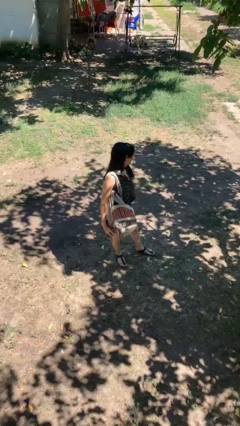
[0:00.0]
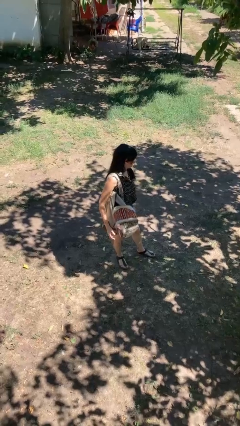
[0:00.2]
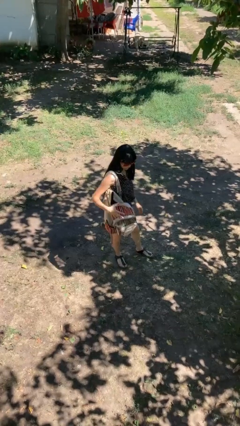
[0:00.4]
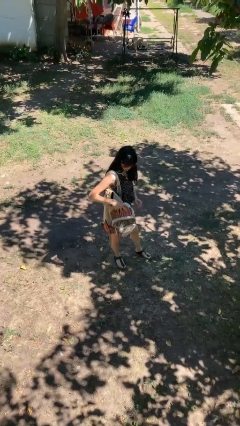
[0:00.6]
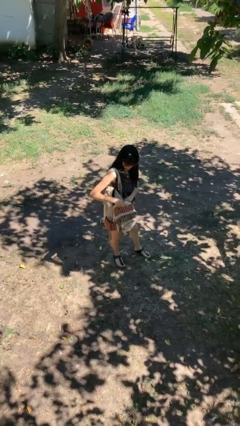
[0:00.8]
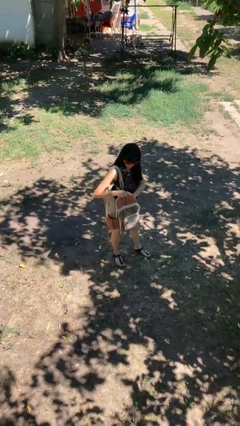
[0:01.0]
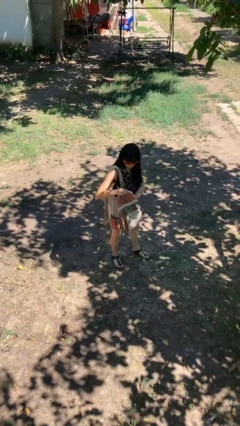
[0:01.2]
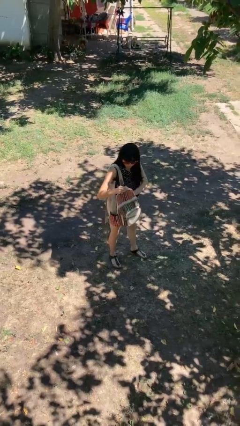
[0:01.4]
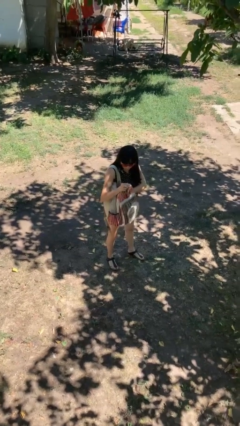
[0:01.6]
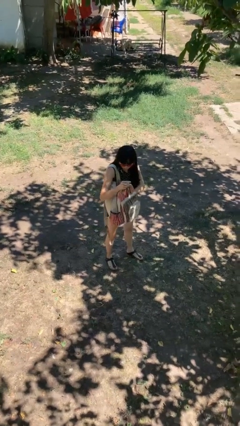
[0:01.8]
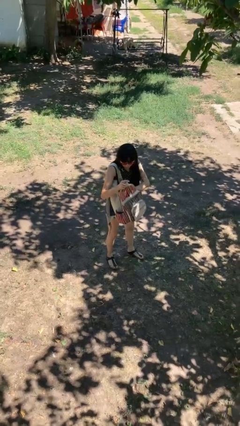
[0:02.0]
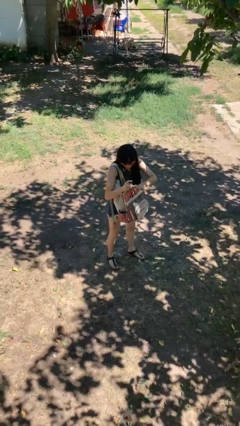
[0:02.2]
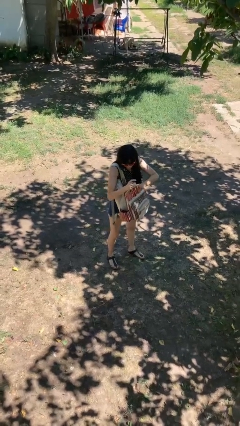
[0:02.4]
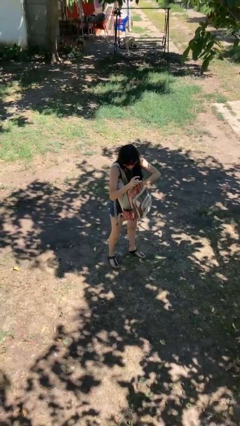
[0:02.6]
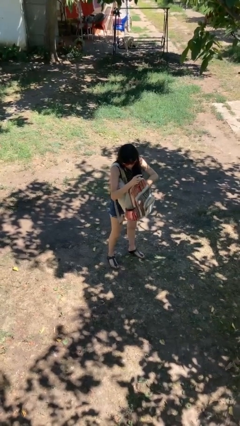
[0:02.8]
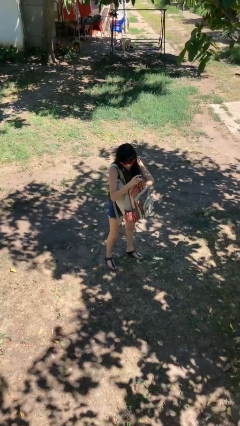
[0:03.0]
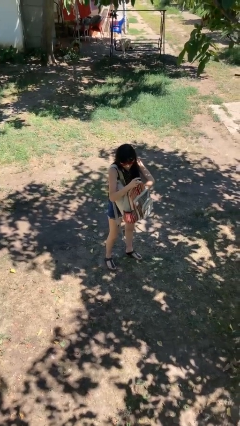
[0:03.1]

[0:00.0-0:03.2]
person searches in backpack

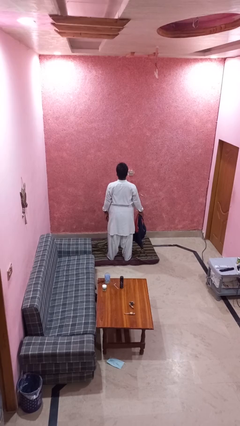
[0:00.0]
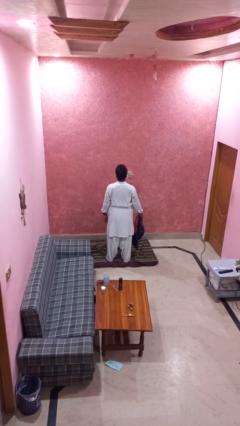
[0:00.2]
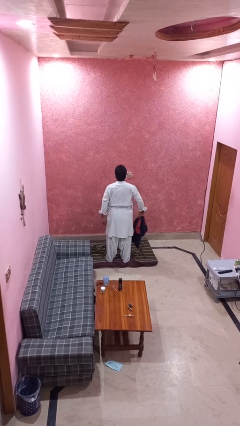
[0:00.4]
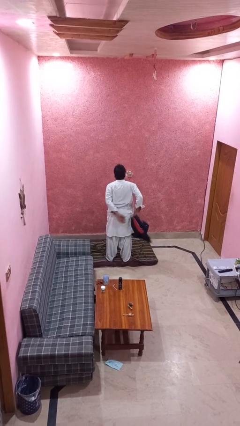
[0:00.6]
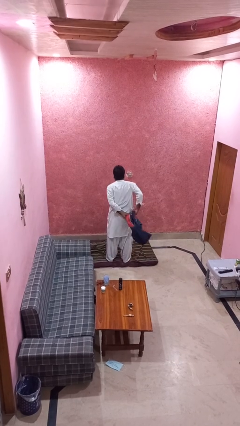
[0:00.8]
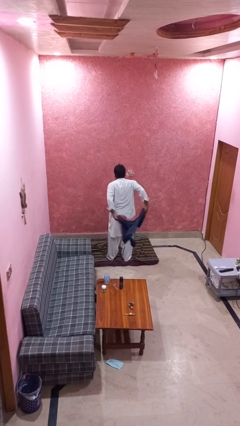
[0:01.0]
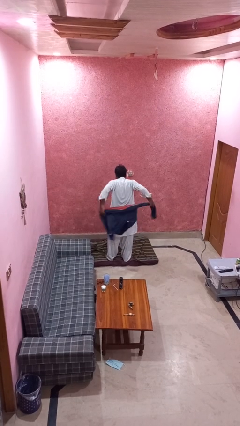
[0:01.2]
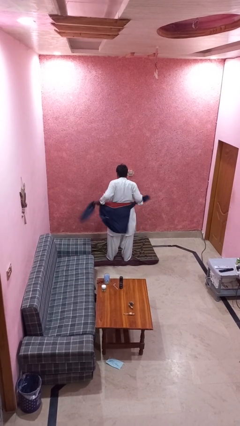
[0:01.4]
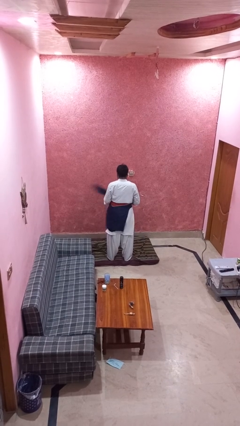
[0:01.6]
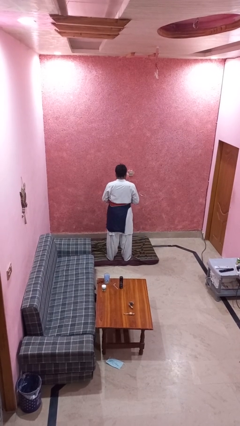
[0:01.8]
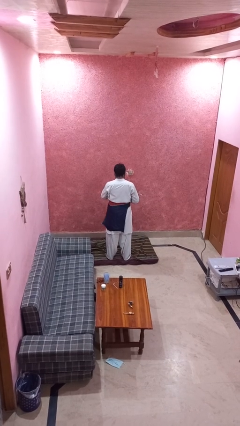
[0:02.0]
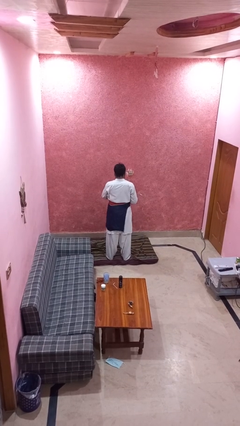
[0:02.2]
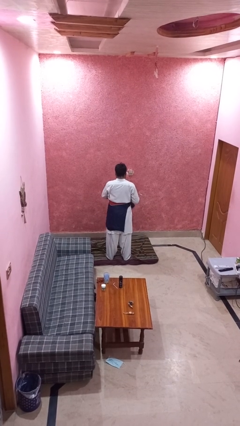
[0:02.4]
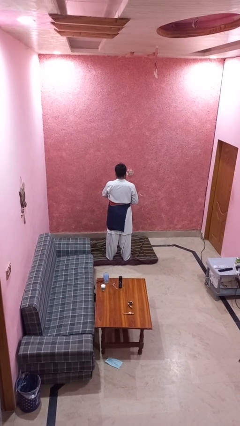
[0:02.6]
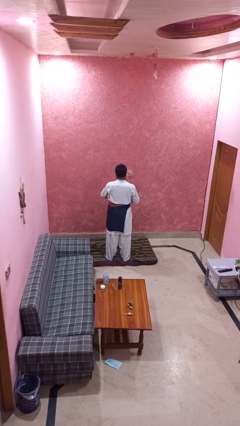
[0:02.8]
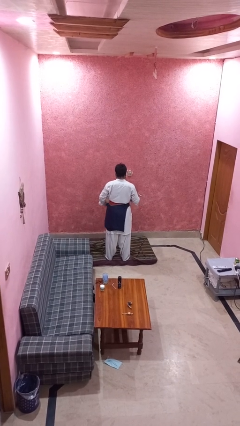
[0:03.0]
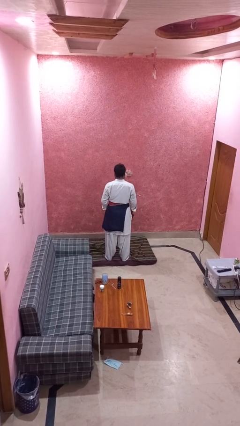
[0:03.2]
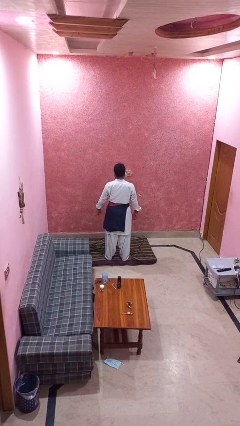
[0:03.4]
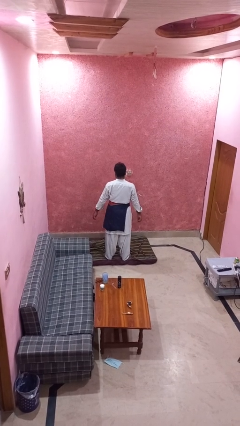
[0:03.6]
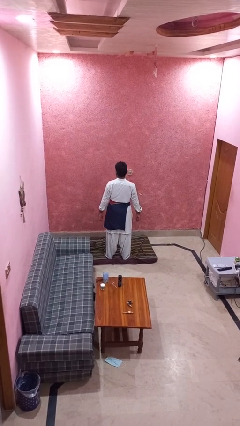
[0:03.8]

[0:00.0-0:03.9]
person ties jacket around waist

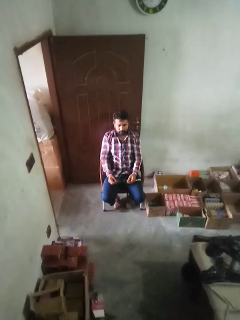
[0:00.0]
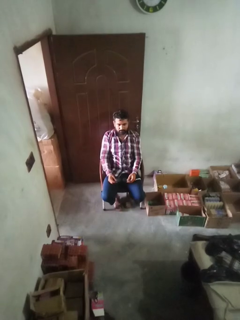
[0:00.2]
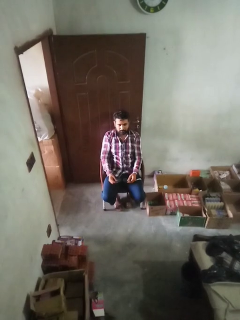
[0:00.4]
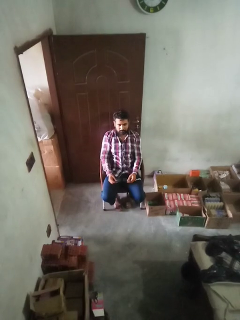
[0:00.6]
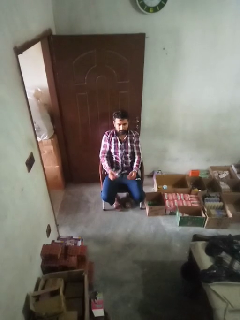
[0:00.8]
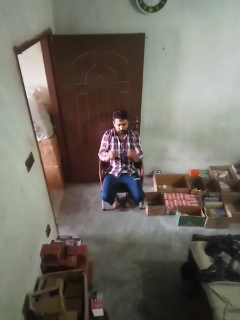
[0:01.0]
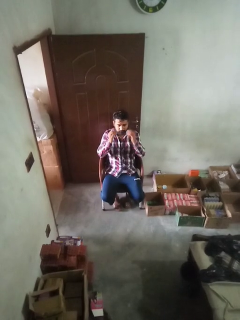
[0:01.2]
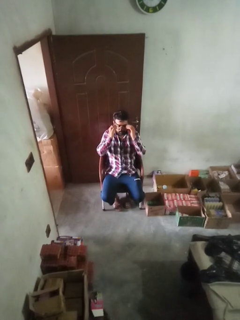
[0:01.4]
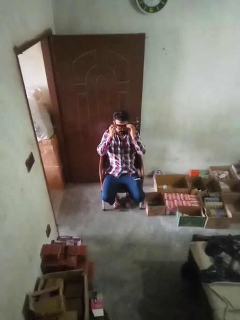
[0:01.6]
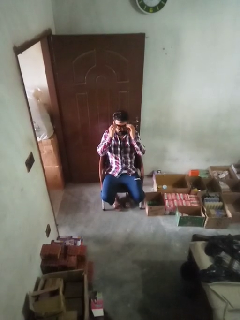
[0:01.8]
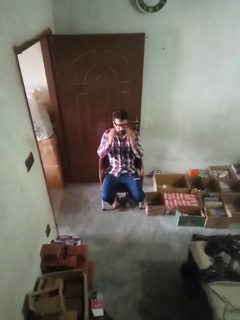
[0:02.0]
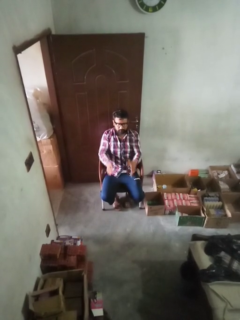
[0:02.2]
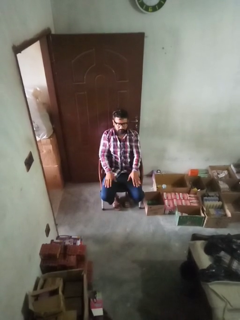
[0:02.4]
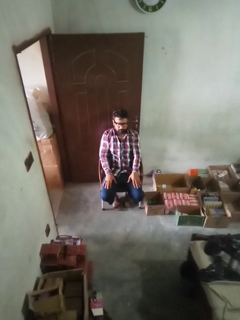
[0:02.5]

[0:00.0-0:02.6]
person puts on glasses

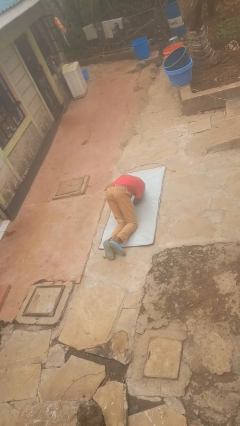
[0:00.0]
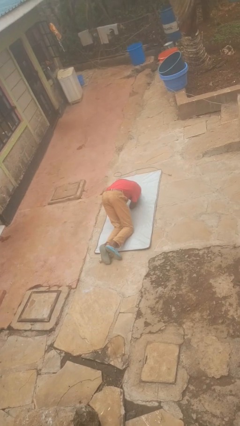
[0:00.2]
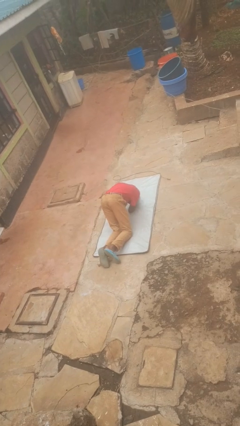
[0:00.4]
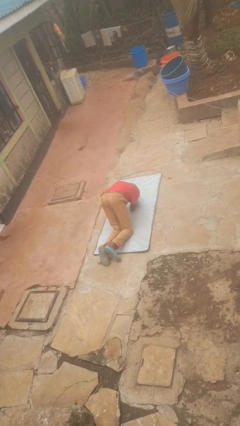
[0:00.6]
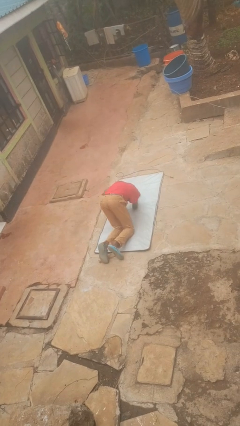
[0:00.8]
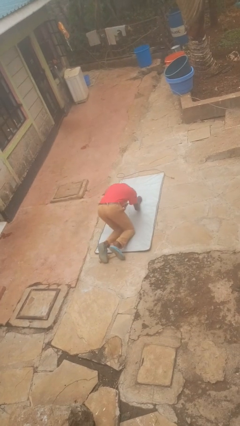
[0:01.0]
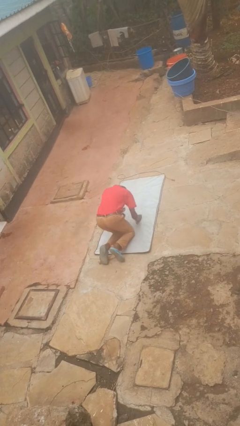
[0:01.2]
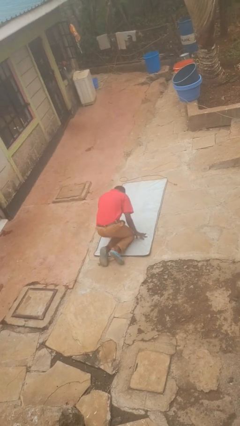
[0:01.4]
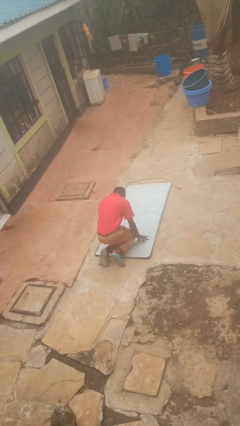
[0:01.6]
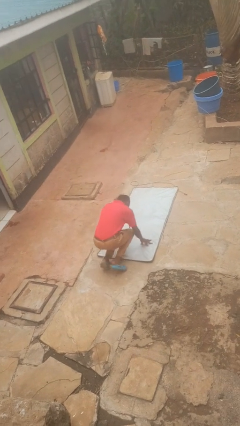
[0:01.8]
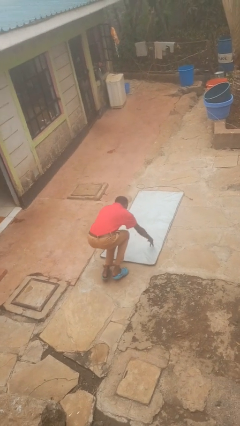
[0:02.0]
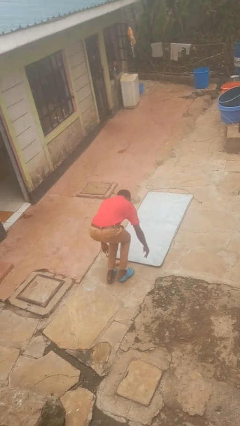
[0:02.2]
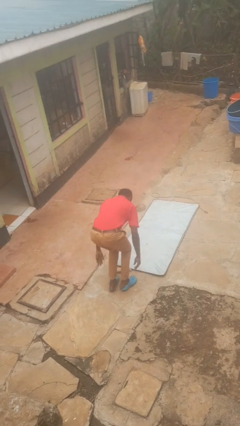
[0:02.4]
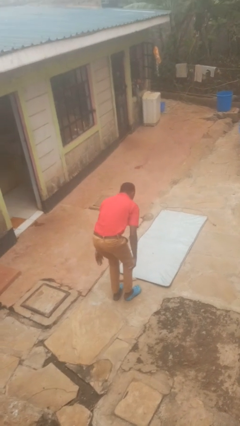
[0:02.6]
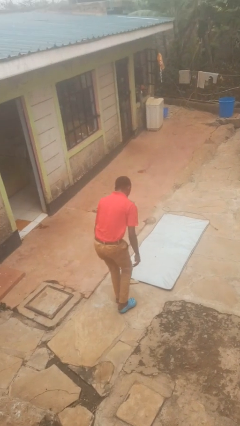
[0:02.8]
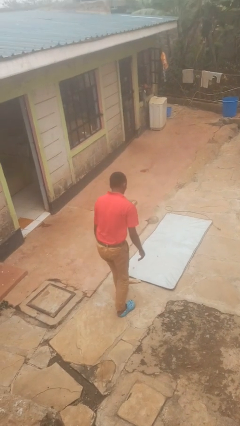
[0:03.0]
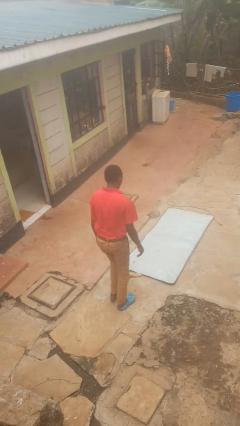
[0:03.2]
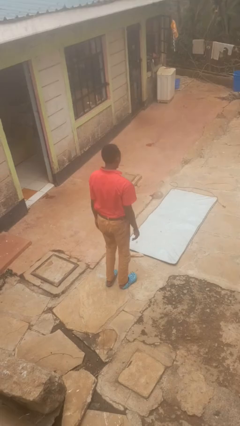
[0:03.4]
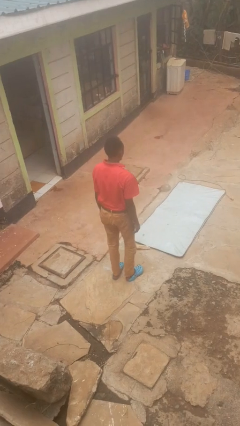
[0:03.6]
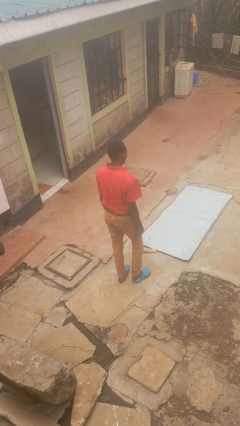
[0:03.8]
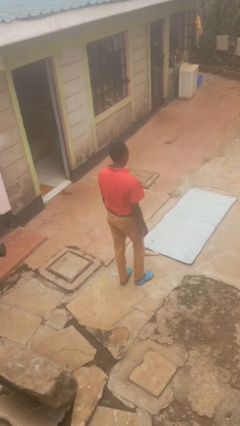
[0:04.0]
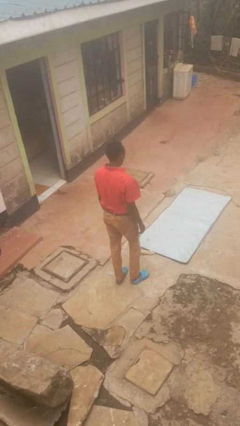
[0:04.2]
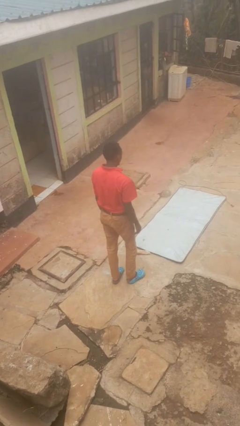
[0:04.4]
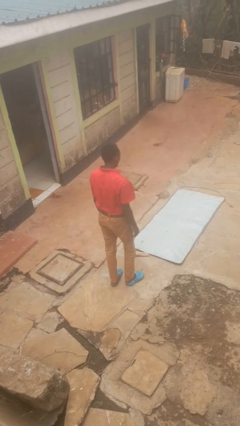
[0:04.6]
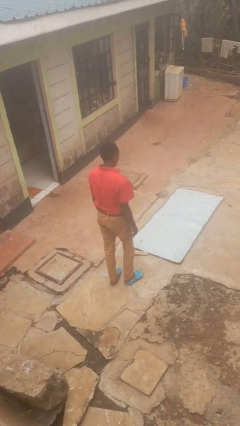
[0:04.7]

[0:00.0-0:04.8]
person stands up from floor

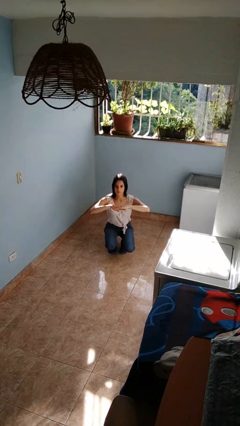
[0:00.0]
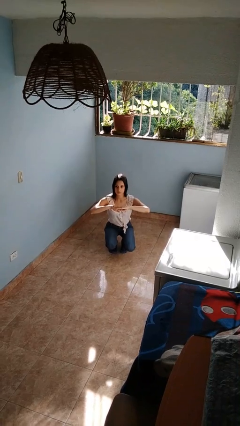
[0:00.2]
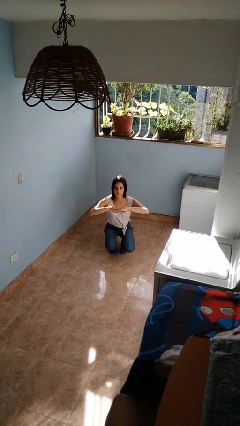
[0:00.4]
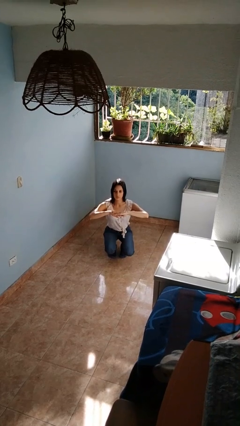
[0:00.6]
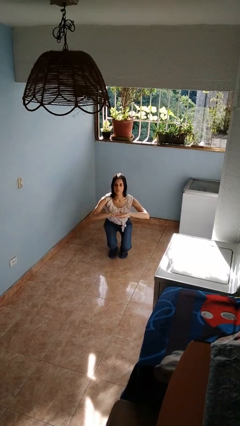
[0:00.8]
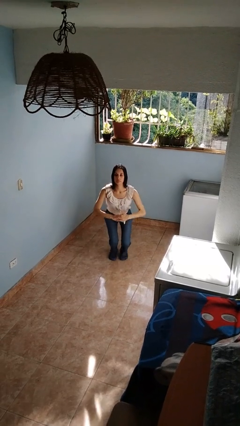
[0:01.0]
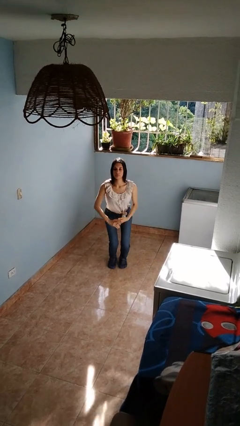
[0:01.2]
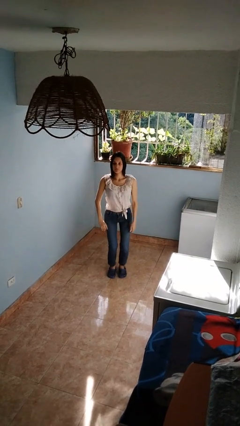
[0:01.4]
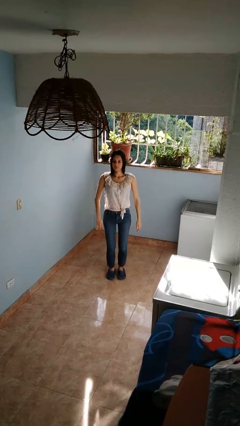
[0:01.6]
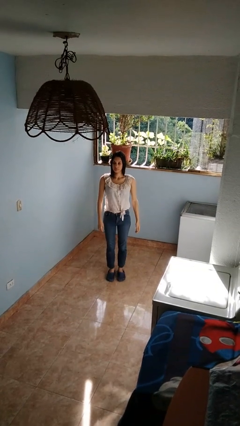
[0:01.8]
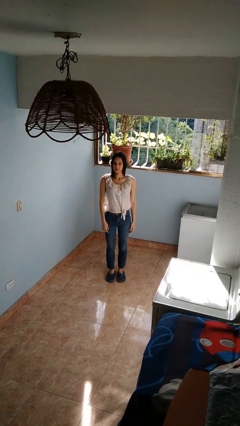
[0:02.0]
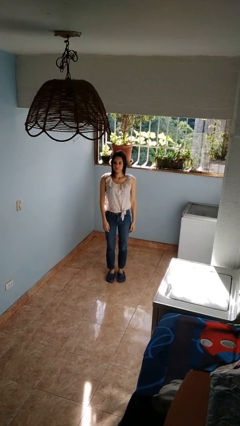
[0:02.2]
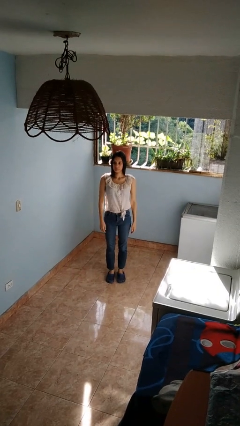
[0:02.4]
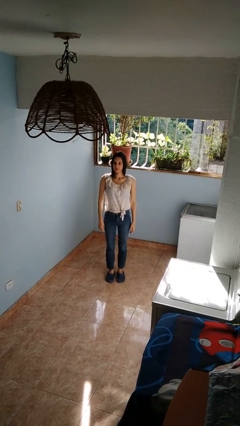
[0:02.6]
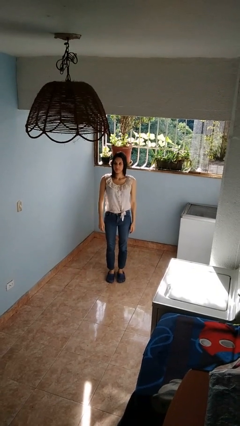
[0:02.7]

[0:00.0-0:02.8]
person stands up

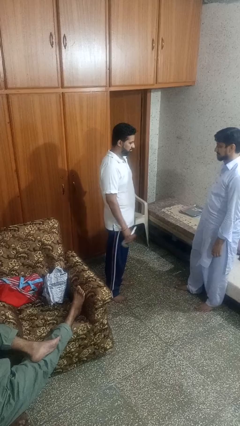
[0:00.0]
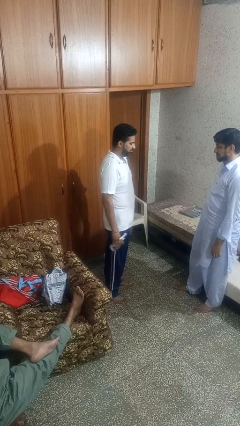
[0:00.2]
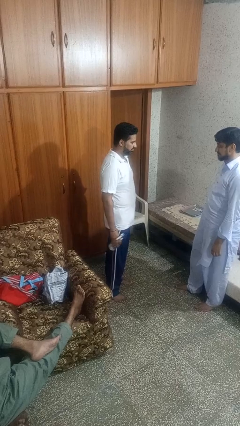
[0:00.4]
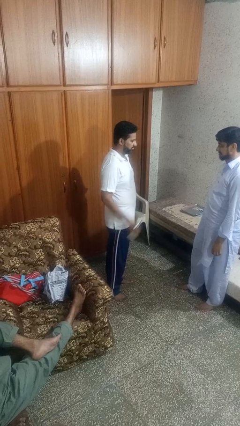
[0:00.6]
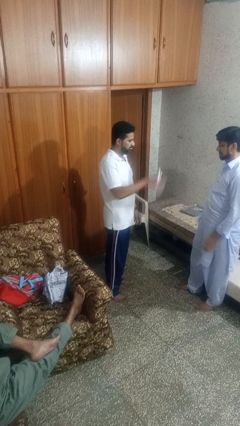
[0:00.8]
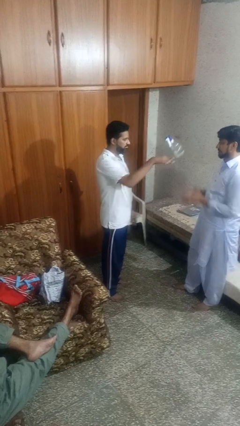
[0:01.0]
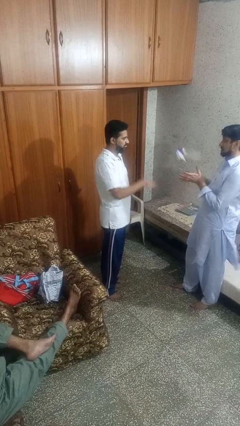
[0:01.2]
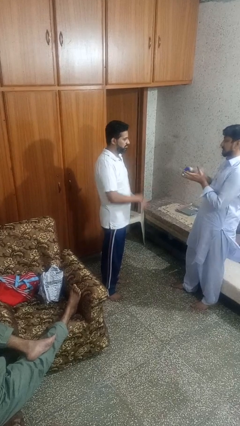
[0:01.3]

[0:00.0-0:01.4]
person throws object to person
